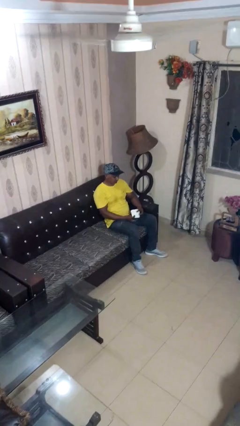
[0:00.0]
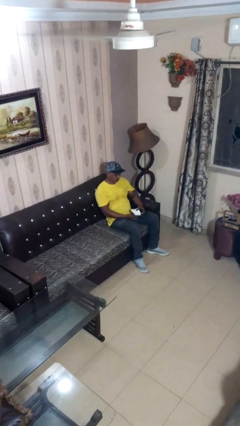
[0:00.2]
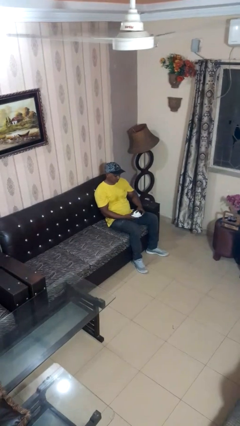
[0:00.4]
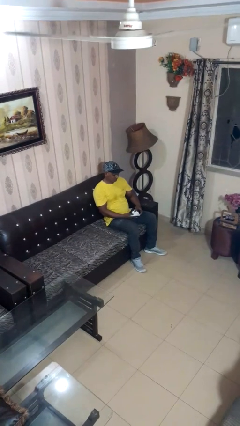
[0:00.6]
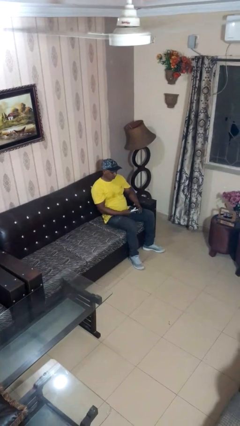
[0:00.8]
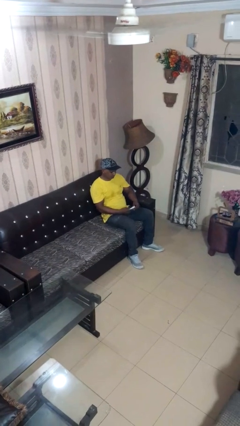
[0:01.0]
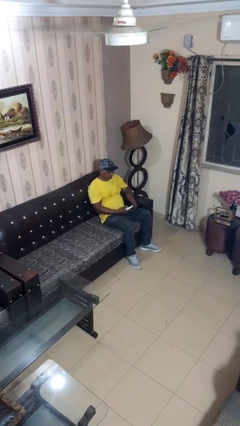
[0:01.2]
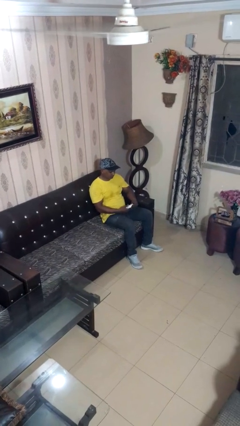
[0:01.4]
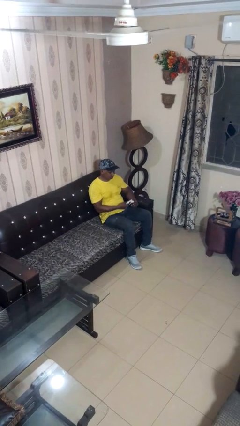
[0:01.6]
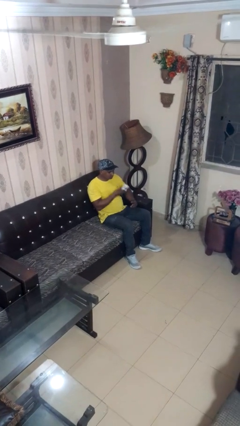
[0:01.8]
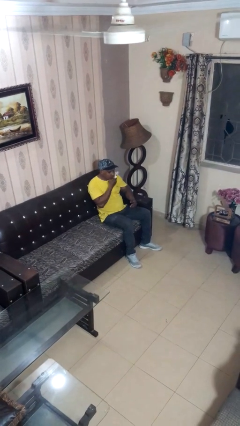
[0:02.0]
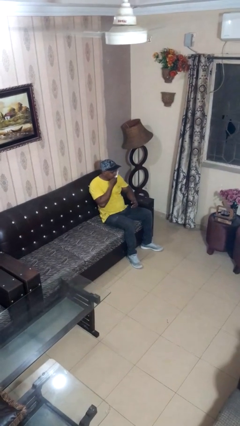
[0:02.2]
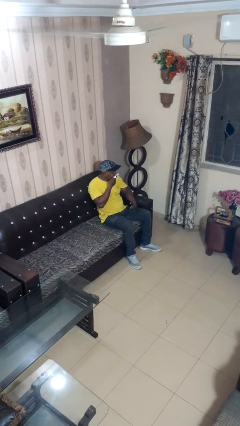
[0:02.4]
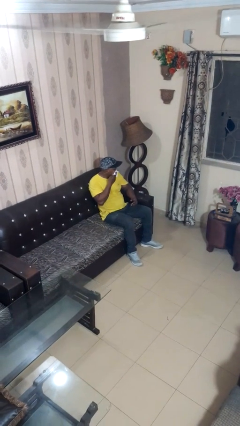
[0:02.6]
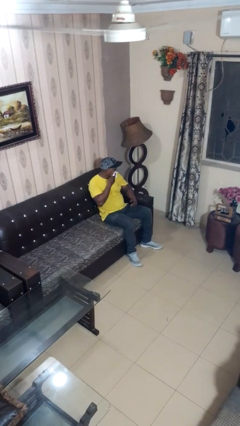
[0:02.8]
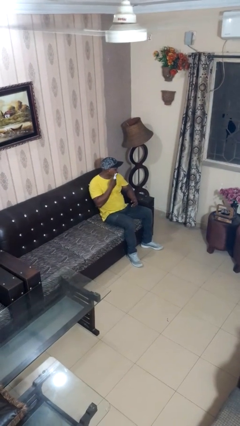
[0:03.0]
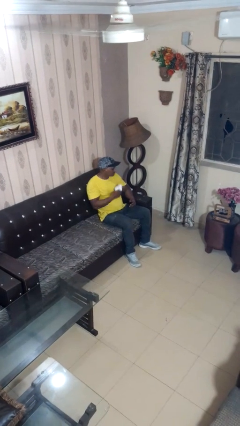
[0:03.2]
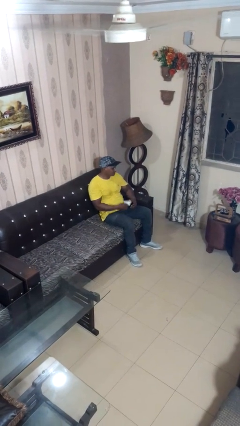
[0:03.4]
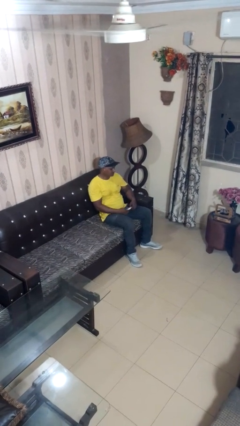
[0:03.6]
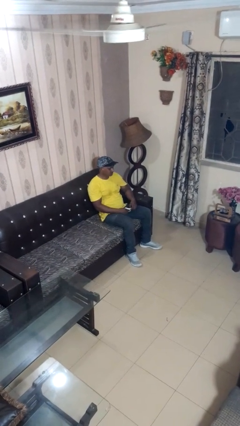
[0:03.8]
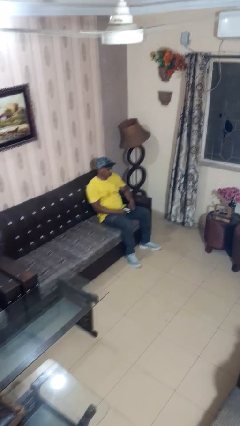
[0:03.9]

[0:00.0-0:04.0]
person wipes mouth with napkin

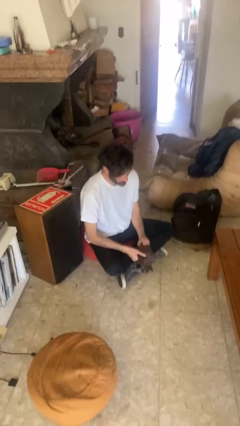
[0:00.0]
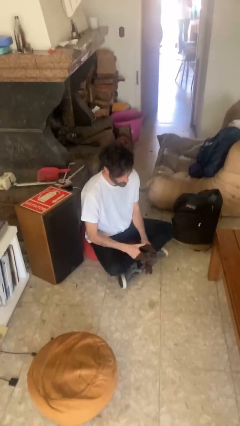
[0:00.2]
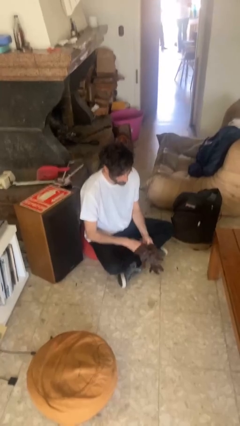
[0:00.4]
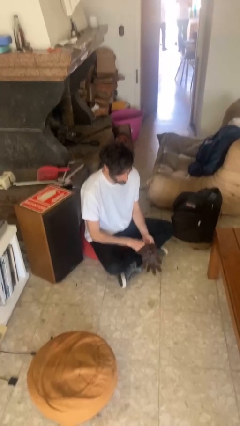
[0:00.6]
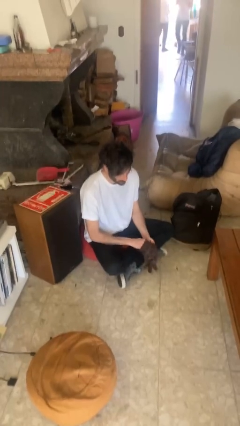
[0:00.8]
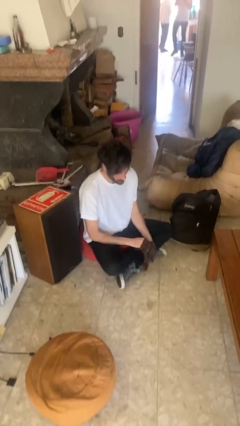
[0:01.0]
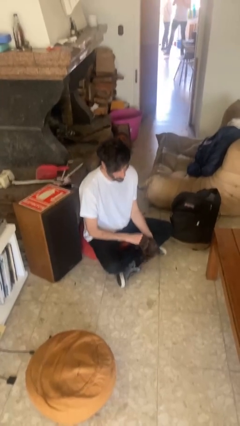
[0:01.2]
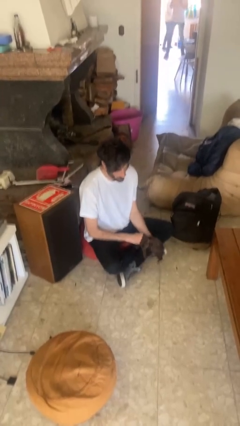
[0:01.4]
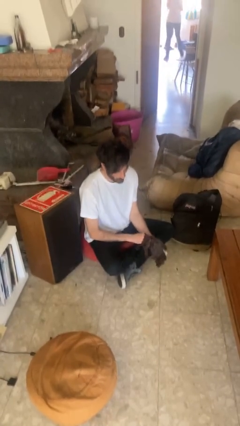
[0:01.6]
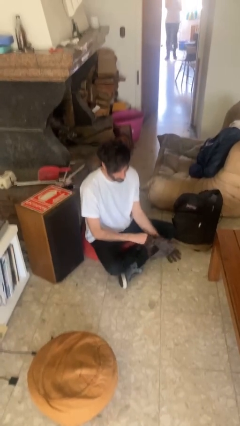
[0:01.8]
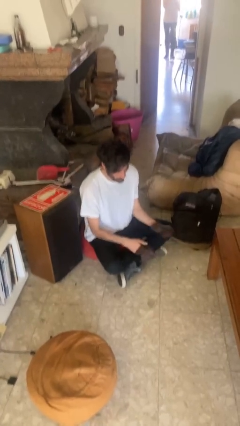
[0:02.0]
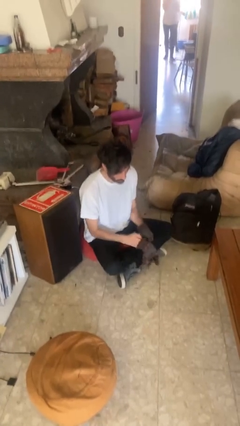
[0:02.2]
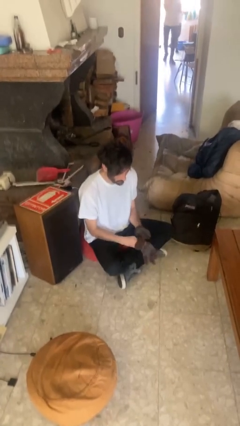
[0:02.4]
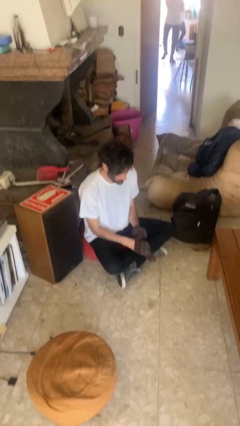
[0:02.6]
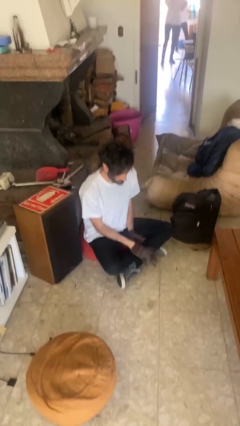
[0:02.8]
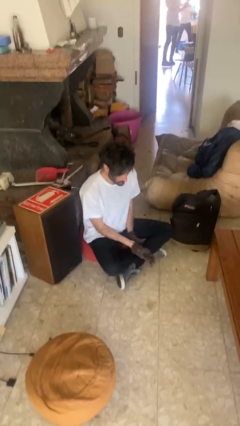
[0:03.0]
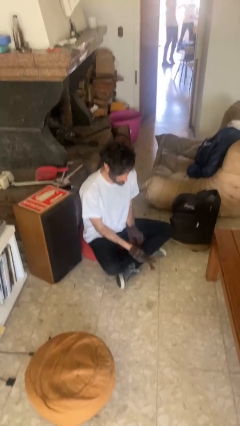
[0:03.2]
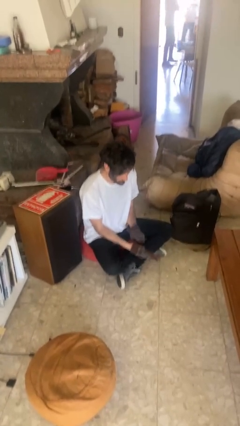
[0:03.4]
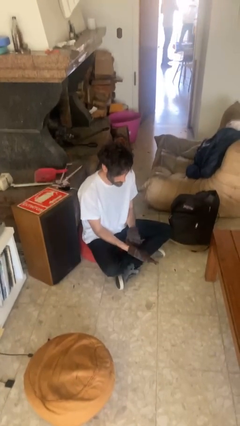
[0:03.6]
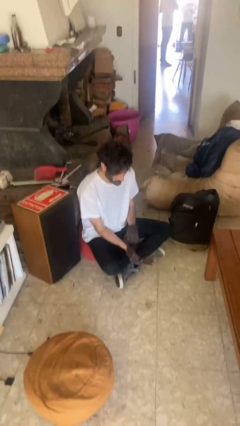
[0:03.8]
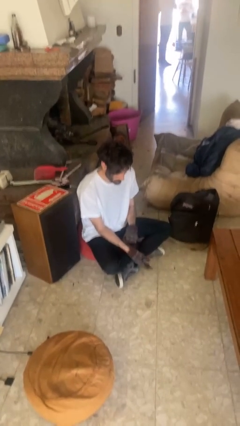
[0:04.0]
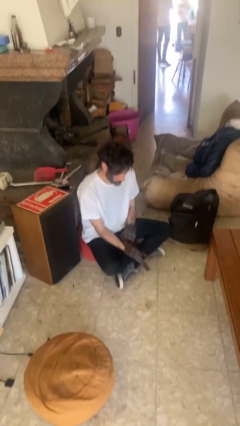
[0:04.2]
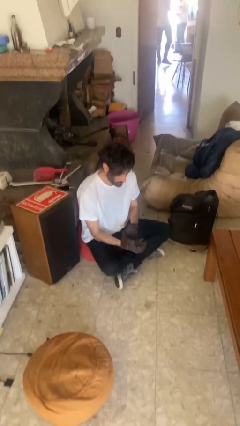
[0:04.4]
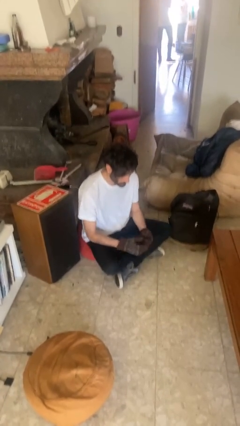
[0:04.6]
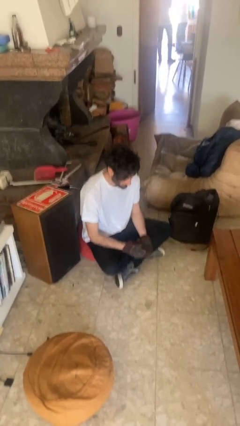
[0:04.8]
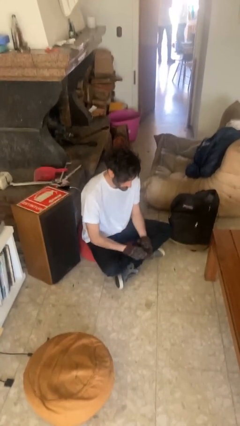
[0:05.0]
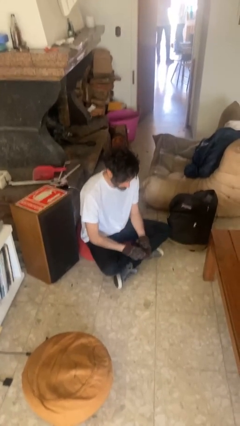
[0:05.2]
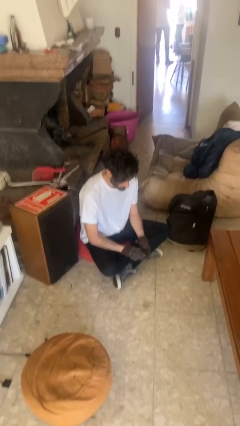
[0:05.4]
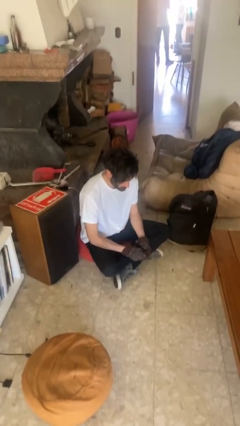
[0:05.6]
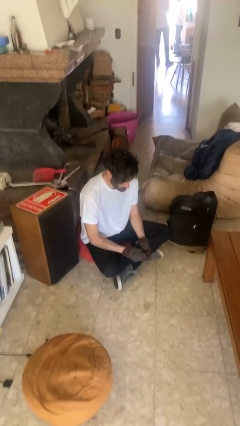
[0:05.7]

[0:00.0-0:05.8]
person puts on gloves

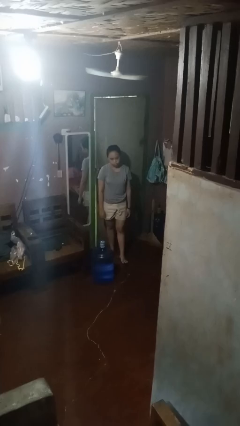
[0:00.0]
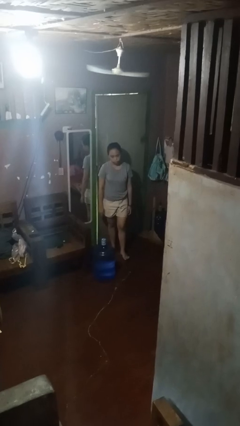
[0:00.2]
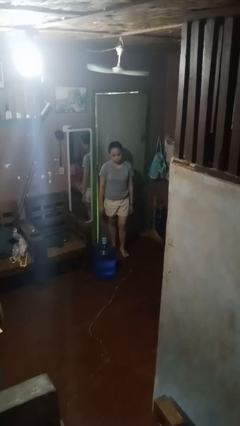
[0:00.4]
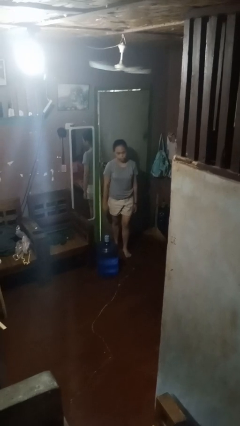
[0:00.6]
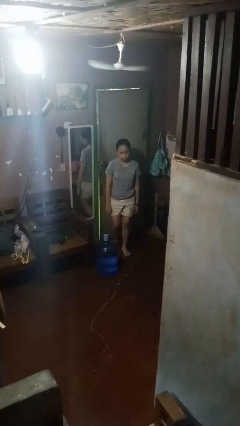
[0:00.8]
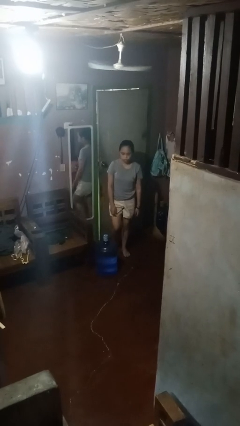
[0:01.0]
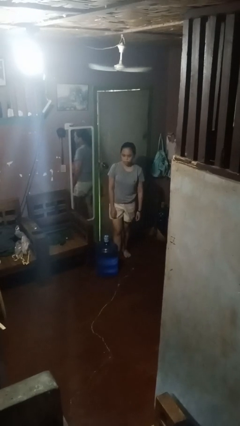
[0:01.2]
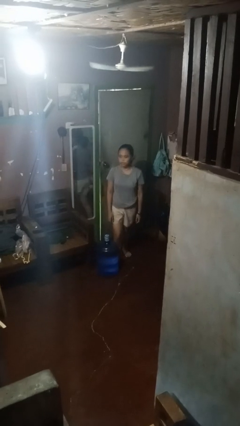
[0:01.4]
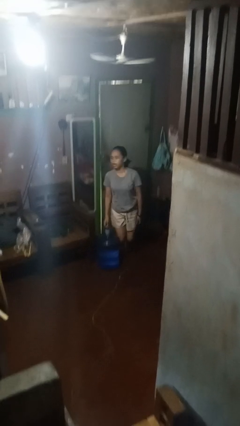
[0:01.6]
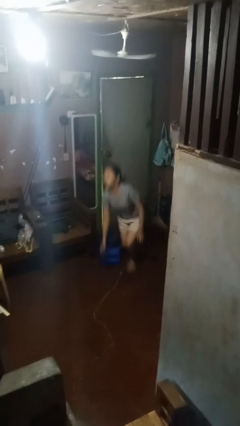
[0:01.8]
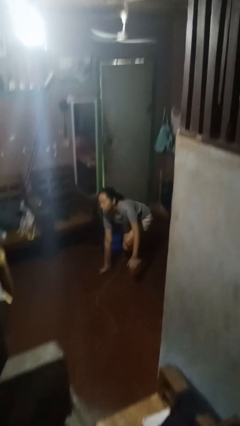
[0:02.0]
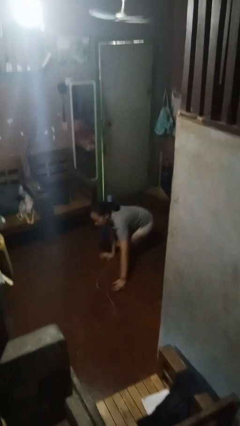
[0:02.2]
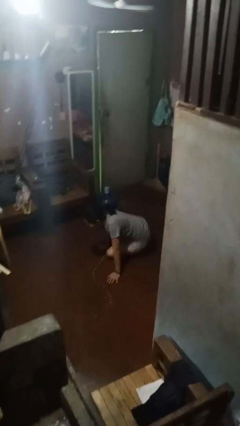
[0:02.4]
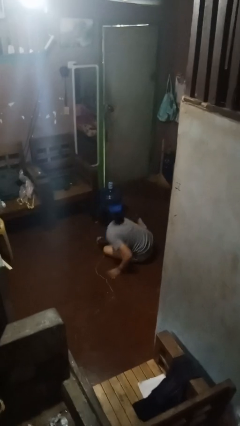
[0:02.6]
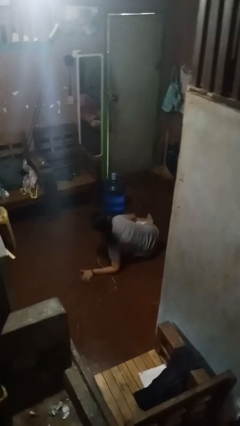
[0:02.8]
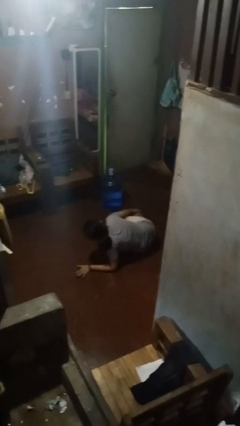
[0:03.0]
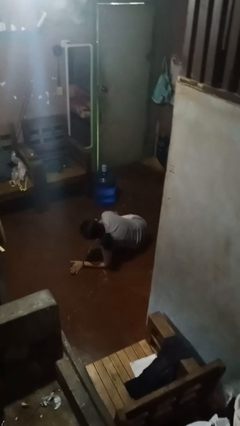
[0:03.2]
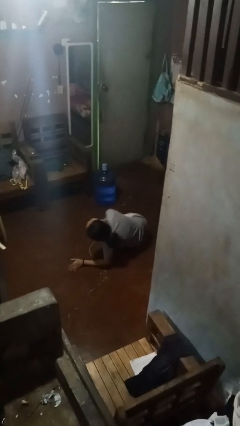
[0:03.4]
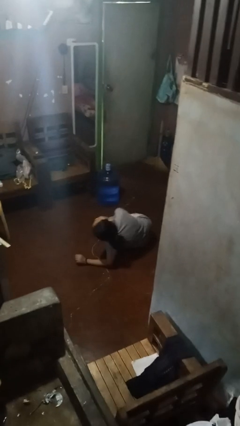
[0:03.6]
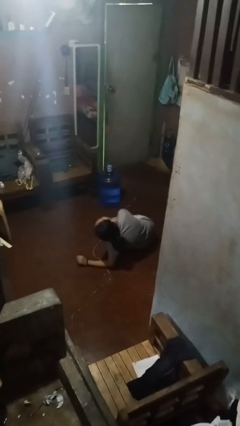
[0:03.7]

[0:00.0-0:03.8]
person trips on object on floor

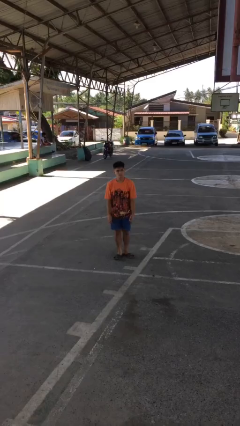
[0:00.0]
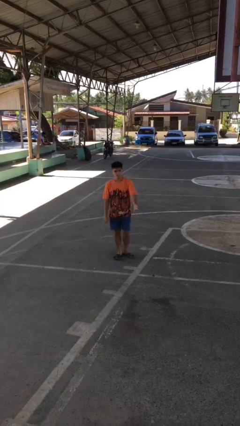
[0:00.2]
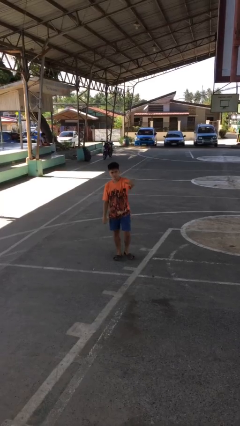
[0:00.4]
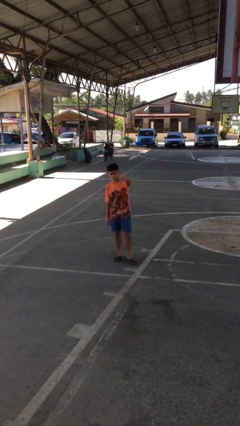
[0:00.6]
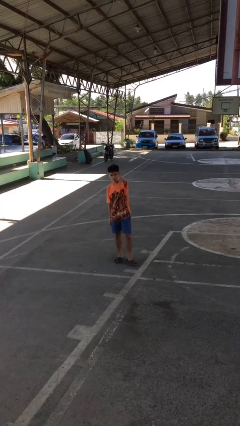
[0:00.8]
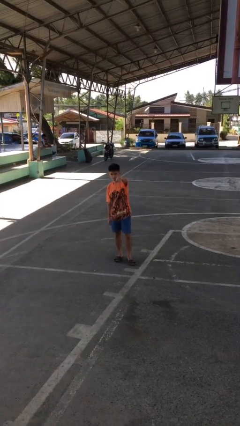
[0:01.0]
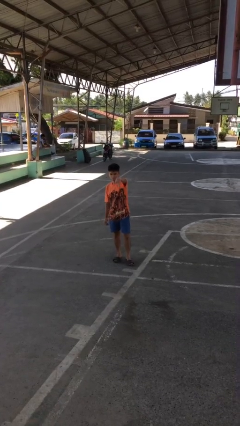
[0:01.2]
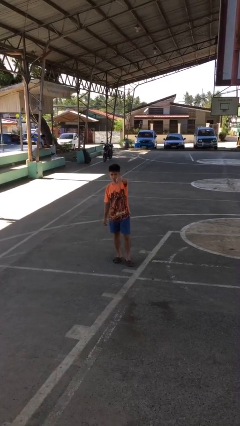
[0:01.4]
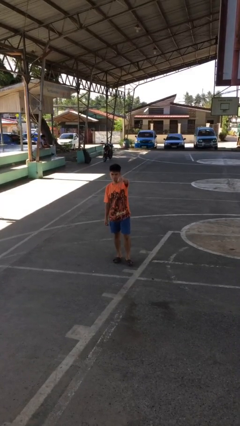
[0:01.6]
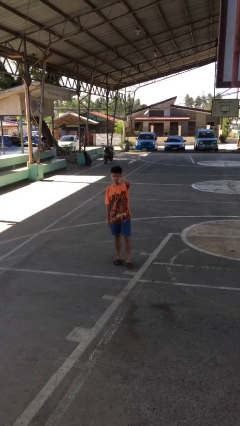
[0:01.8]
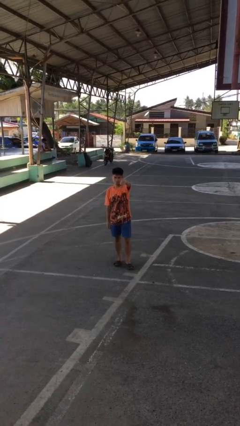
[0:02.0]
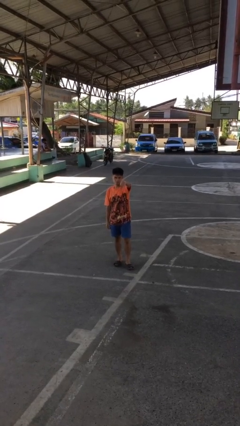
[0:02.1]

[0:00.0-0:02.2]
person gestures thumbs down

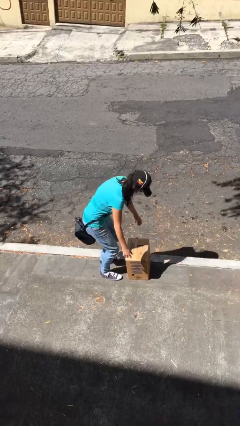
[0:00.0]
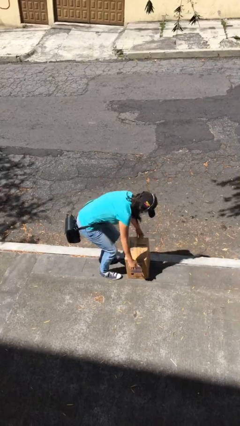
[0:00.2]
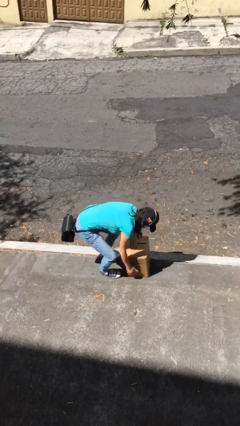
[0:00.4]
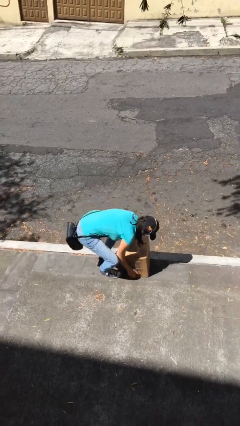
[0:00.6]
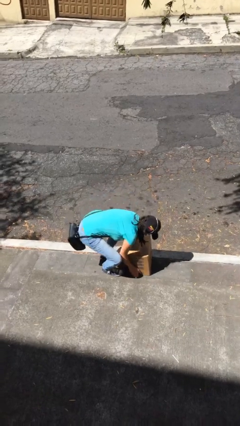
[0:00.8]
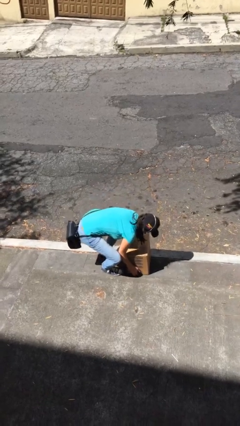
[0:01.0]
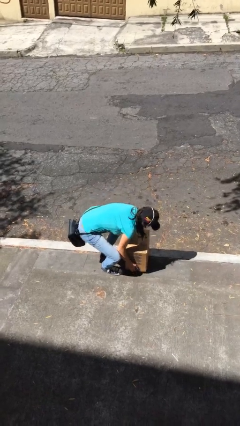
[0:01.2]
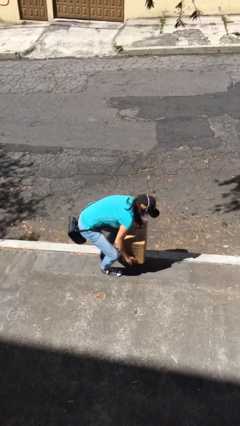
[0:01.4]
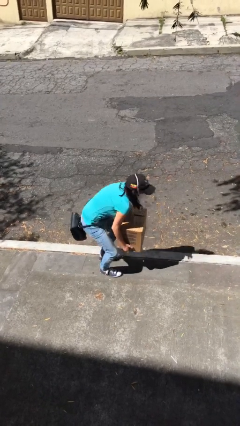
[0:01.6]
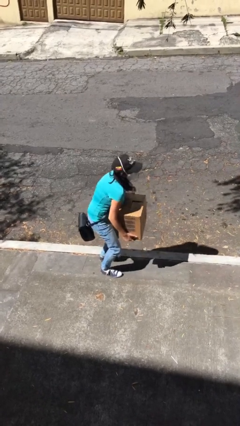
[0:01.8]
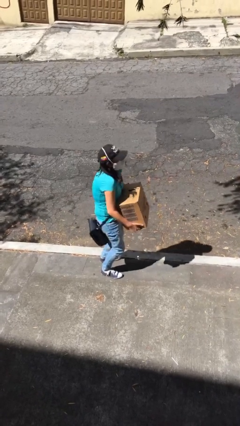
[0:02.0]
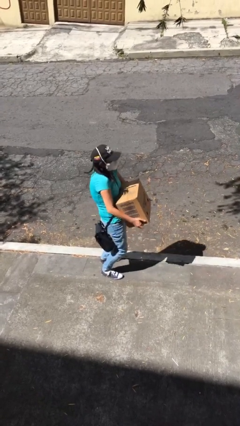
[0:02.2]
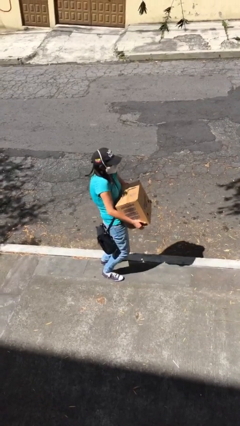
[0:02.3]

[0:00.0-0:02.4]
person picks up object from floor
